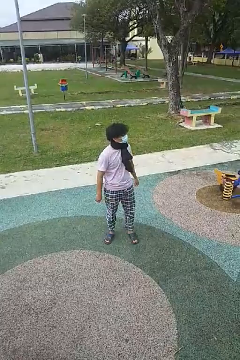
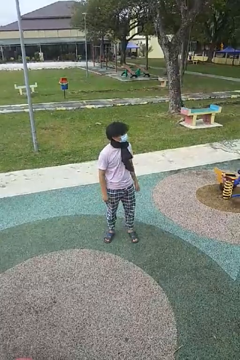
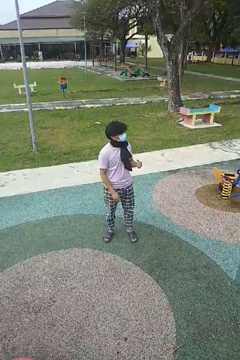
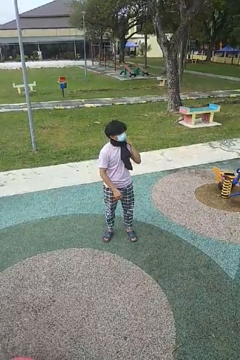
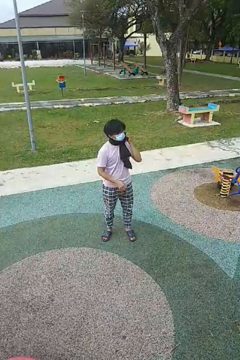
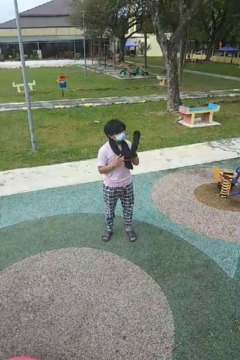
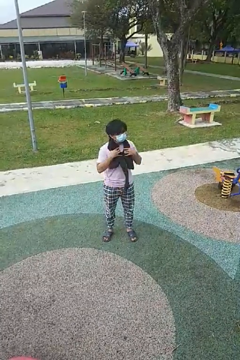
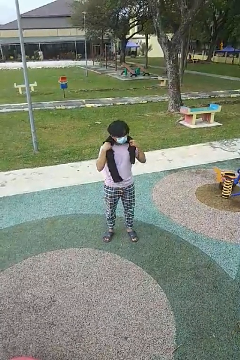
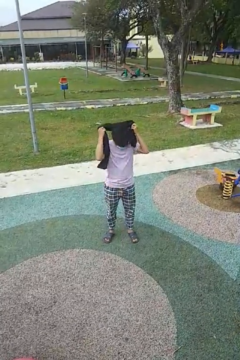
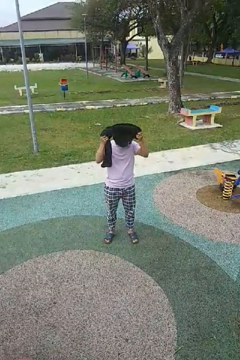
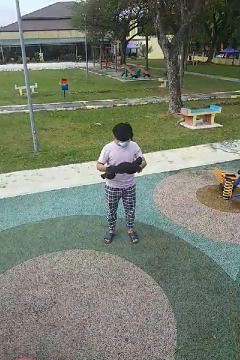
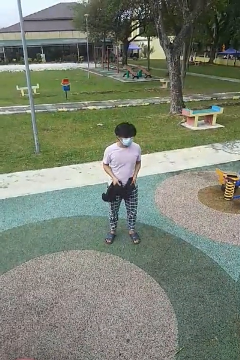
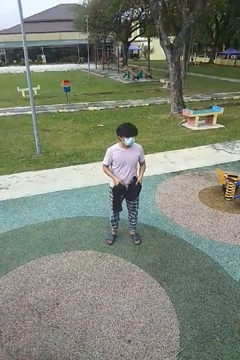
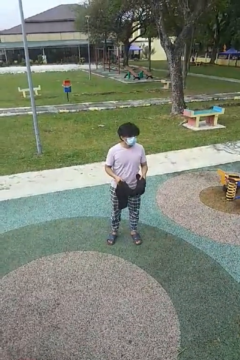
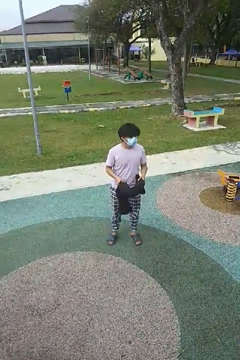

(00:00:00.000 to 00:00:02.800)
person takes off scarf

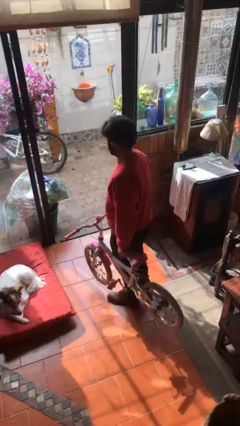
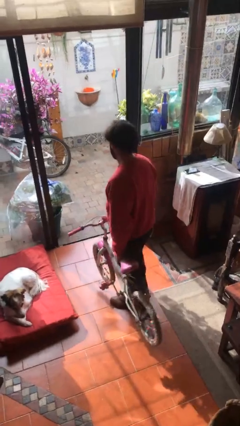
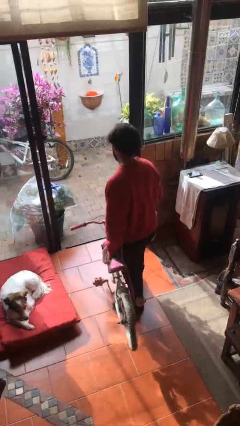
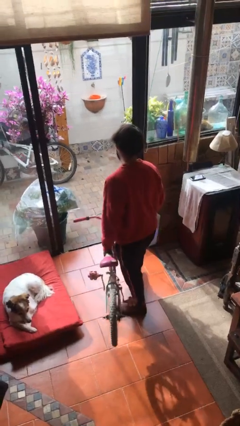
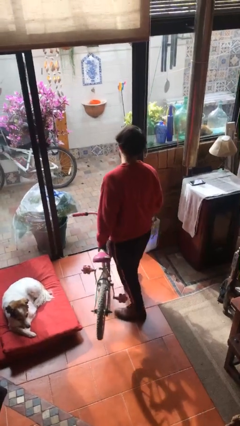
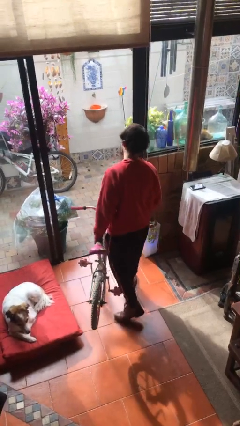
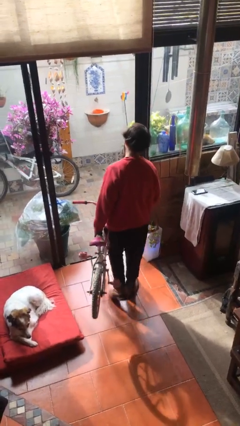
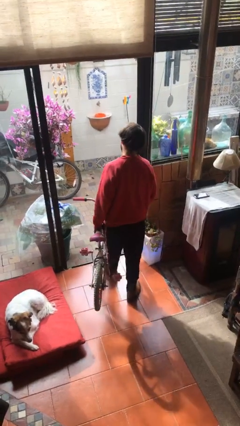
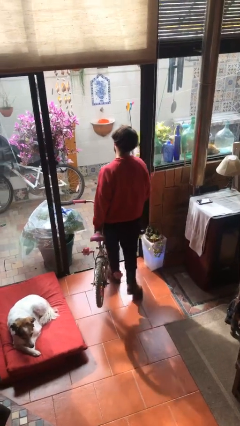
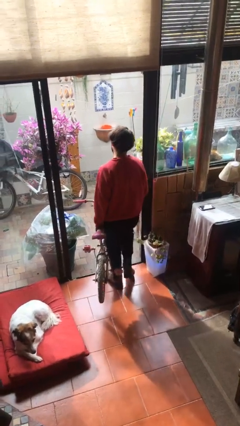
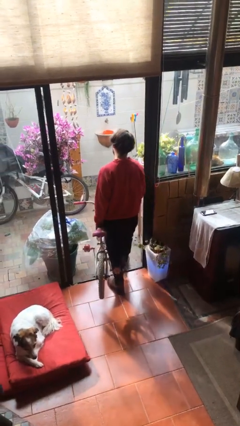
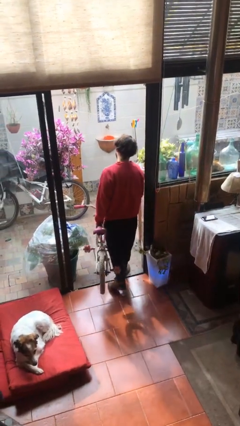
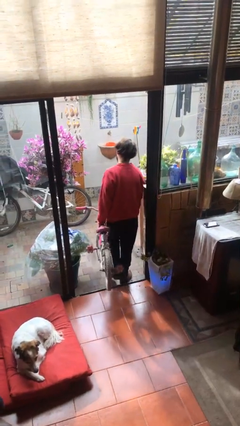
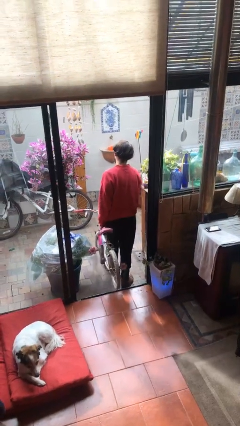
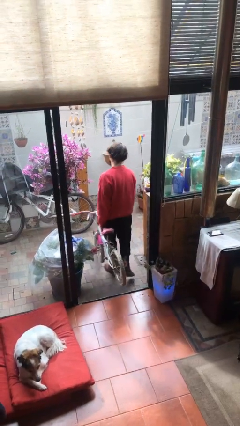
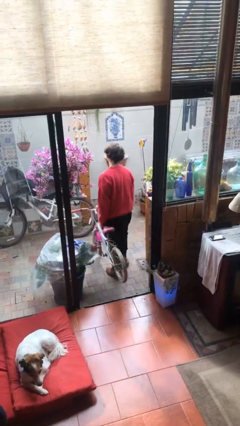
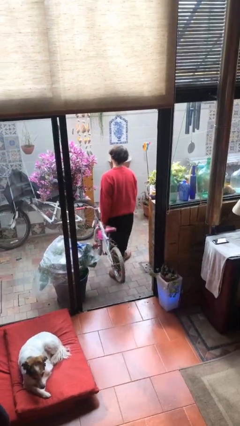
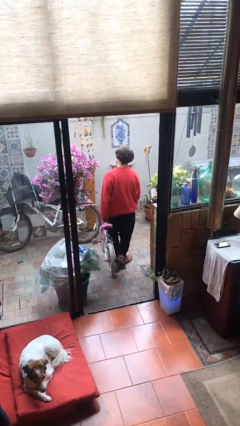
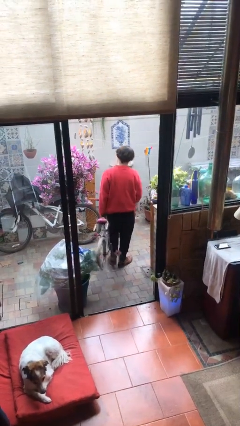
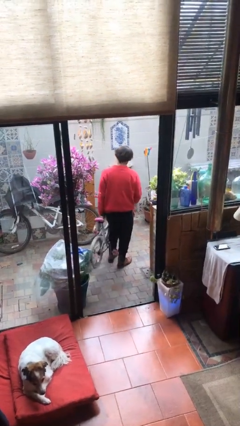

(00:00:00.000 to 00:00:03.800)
person carries bicycle

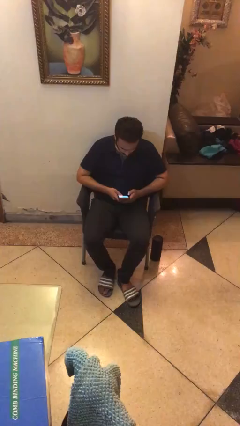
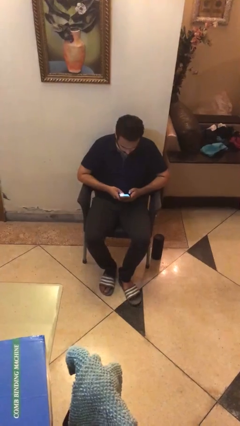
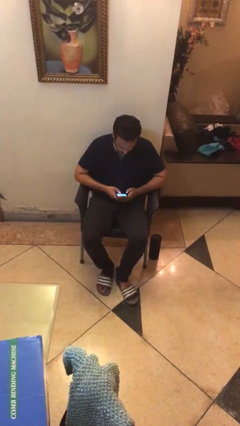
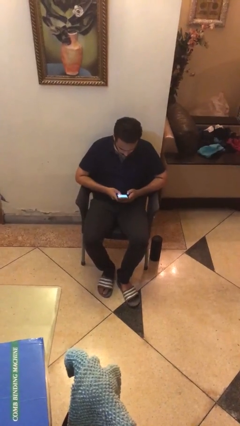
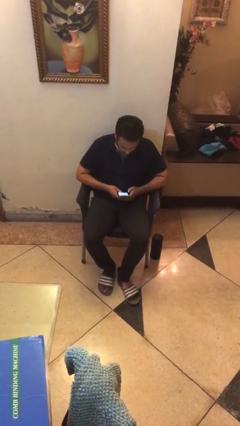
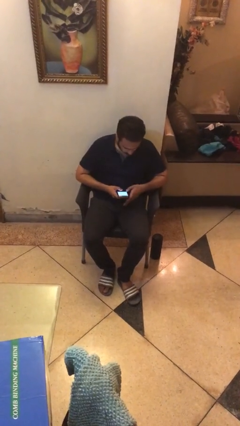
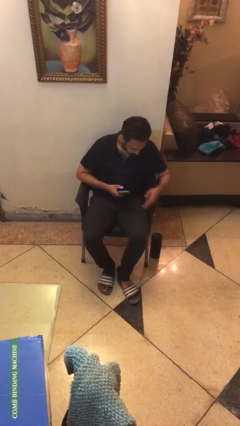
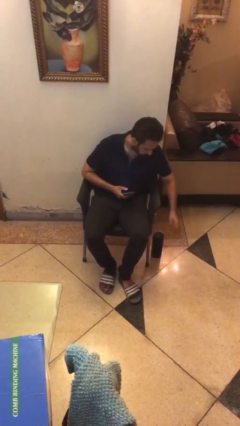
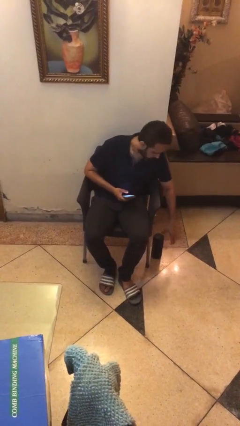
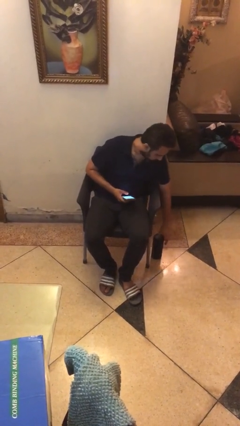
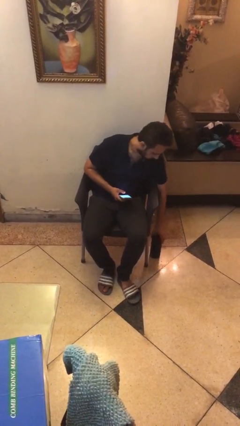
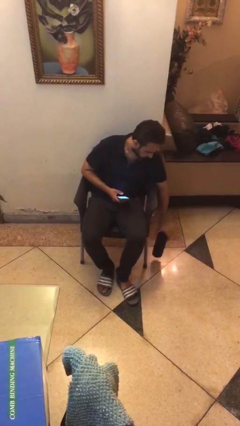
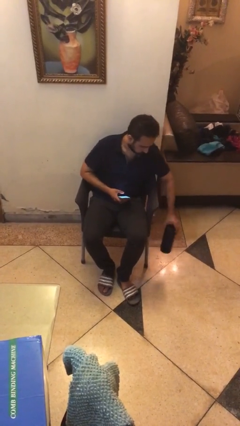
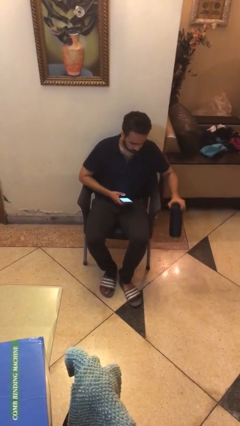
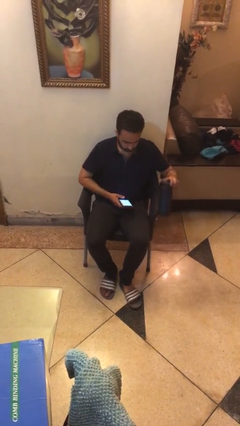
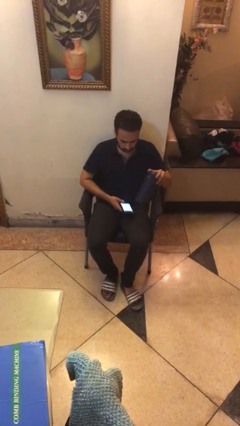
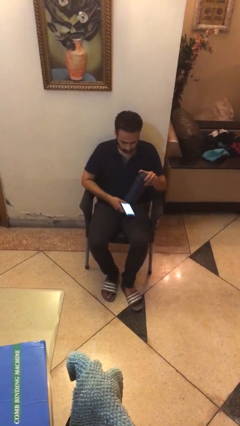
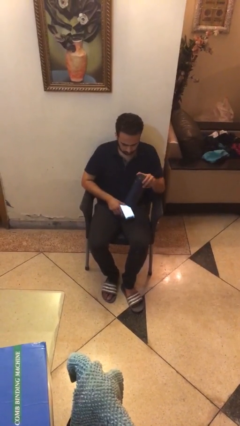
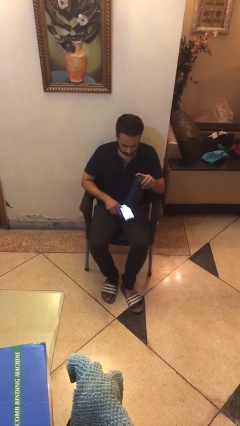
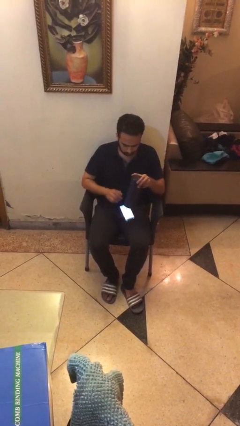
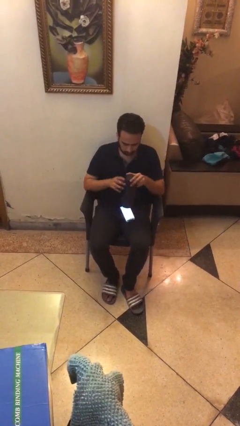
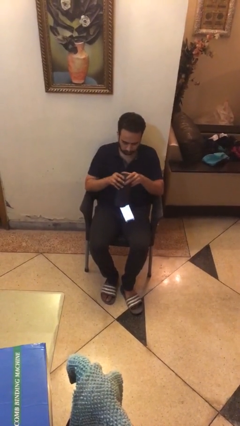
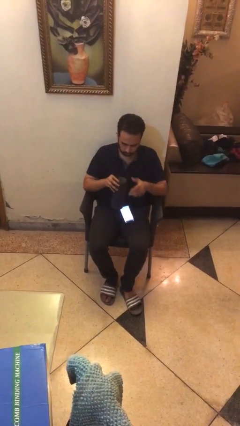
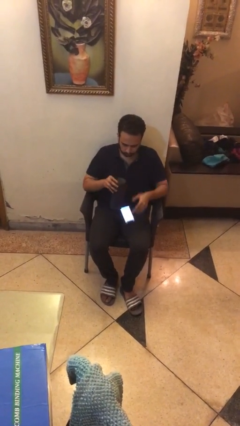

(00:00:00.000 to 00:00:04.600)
person picks up object from floor

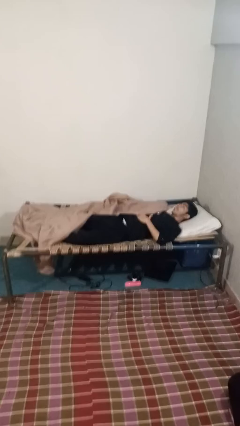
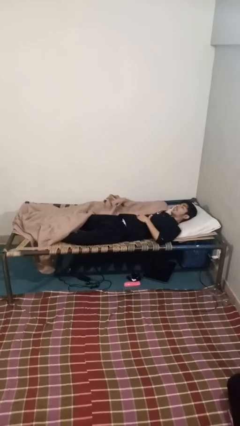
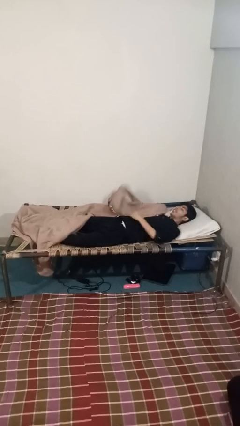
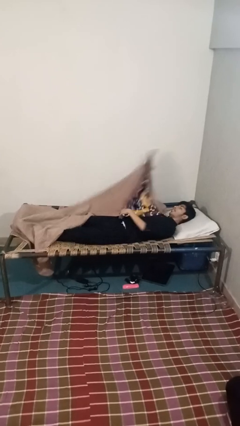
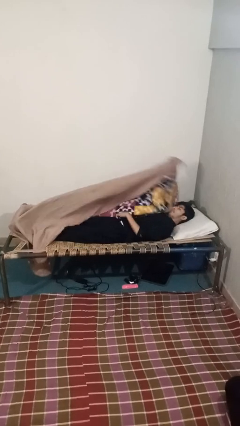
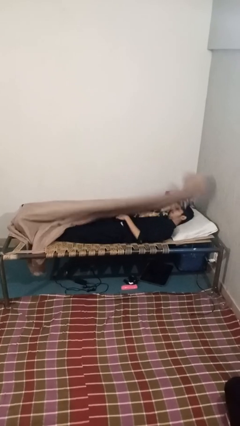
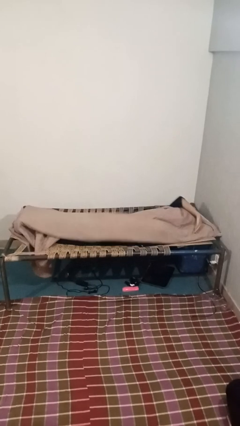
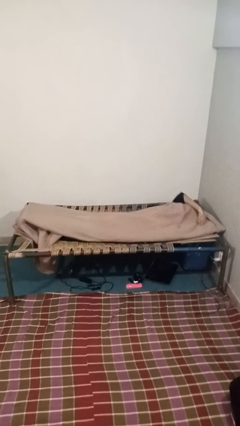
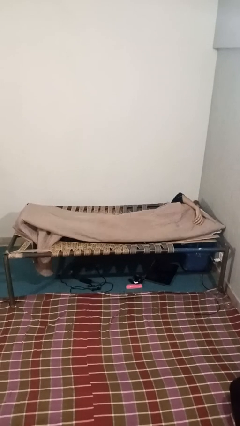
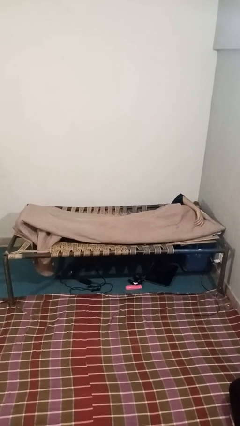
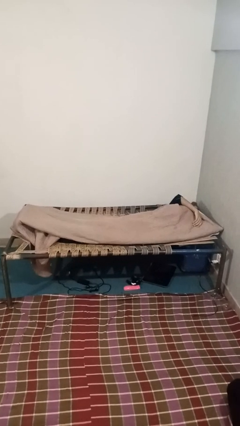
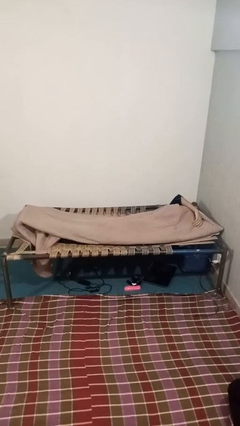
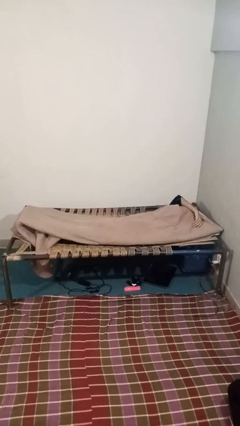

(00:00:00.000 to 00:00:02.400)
person covers with blanket

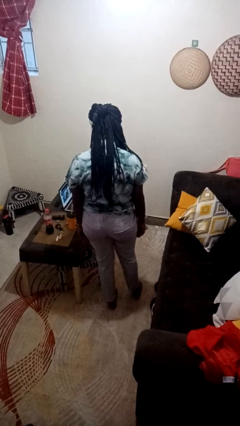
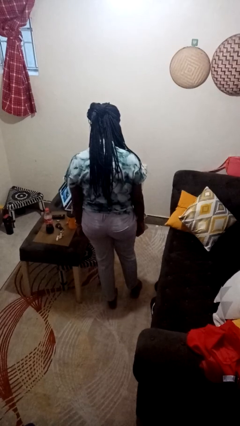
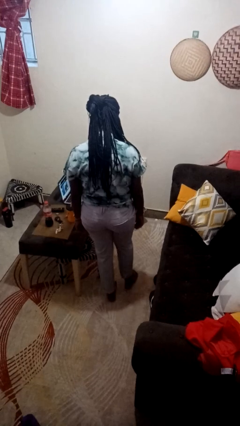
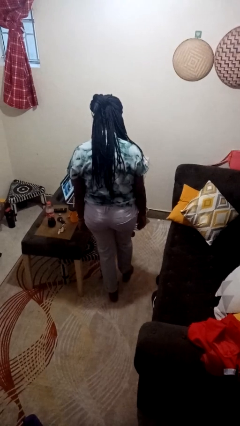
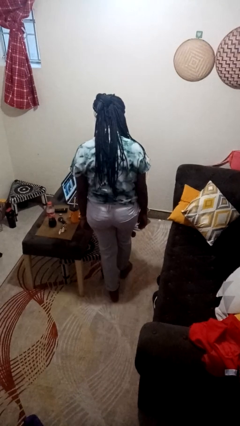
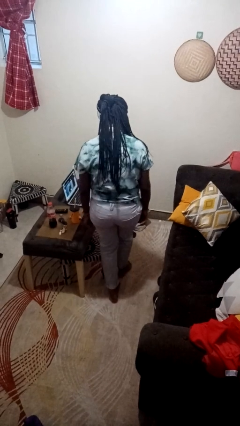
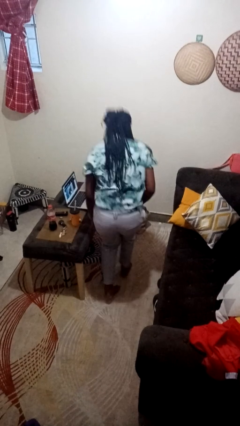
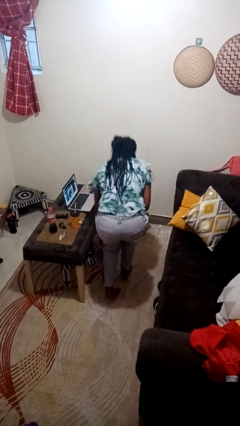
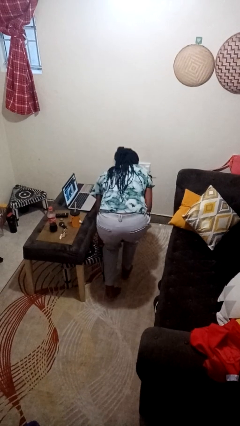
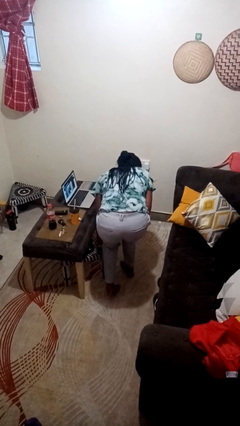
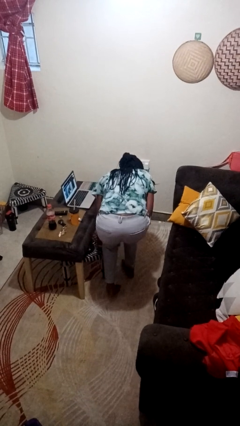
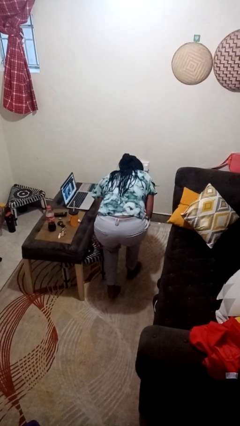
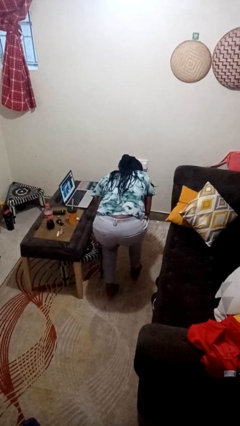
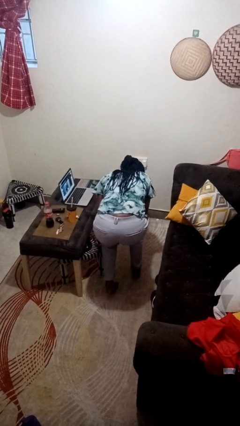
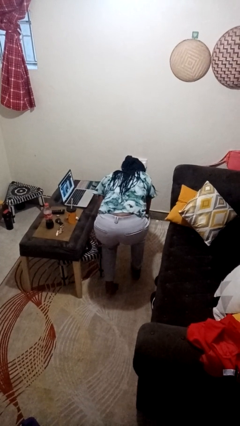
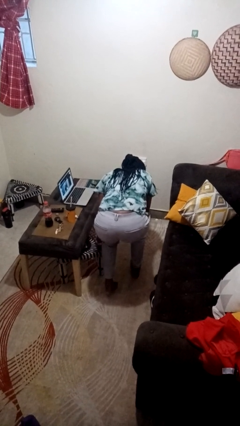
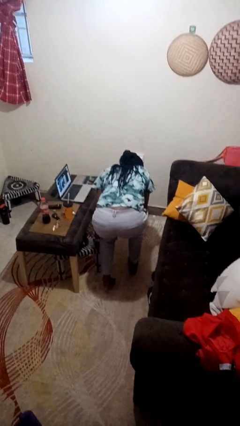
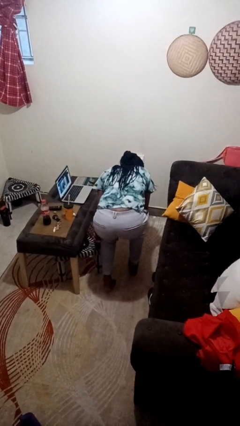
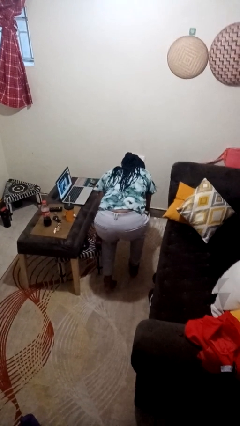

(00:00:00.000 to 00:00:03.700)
person trips on object on floor

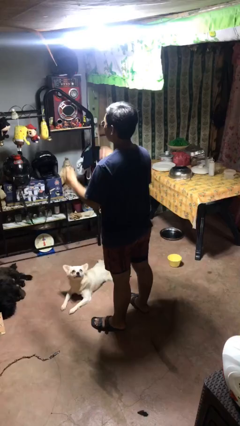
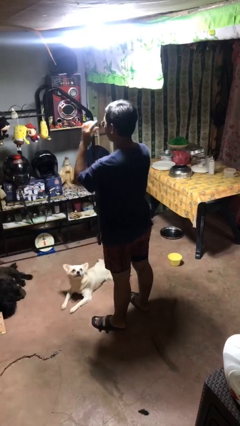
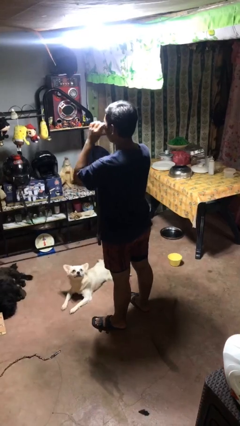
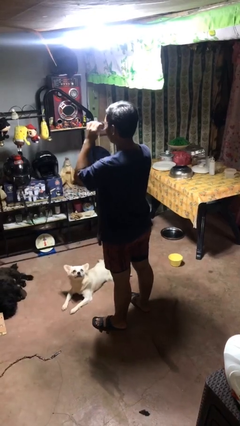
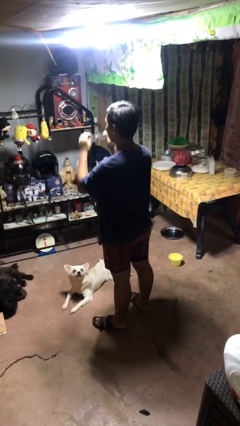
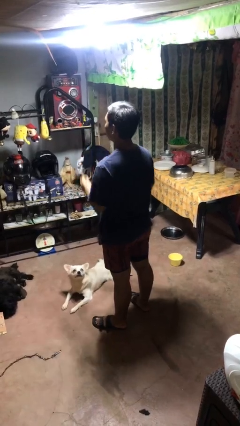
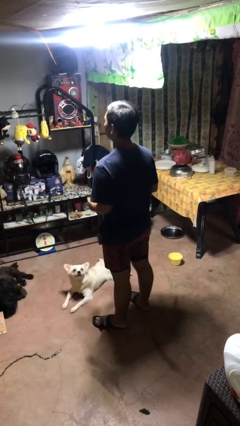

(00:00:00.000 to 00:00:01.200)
person takes off sunglasses
